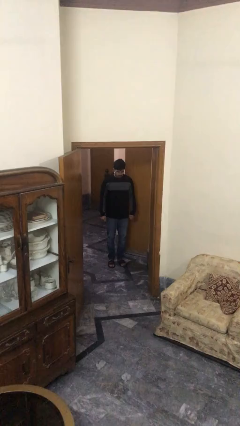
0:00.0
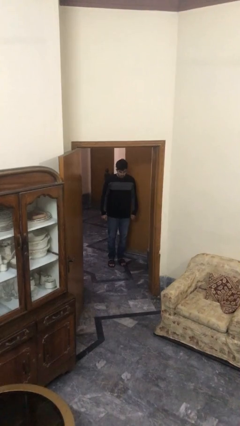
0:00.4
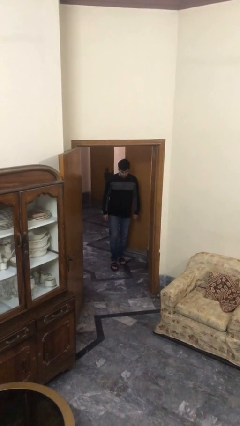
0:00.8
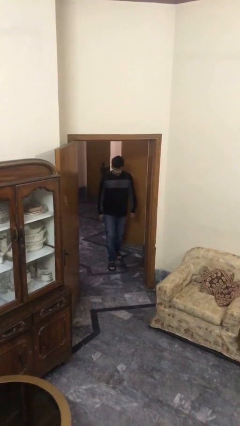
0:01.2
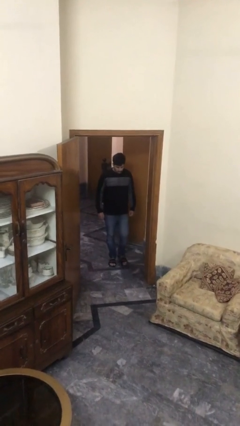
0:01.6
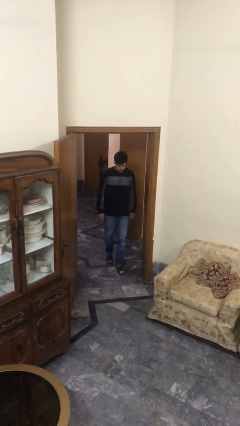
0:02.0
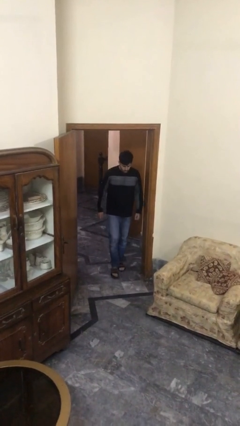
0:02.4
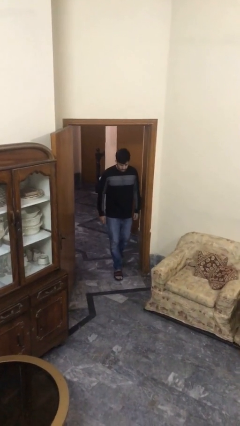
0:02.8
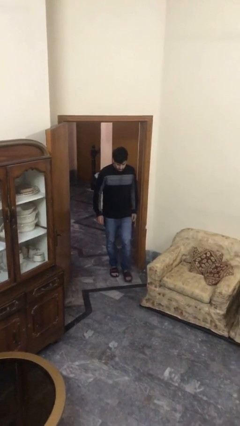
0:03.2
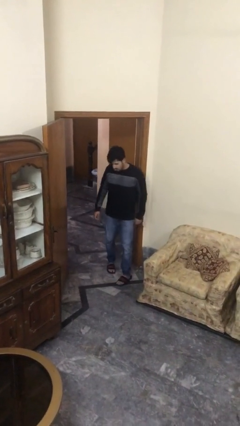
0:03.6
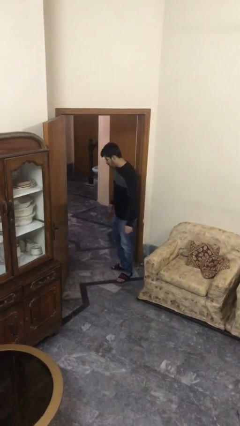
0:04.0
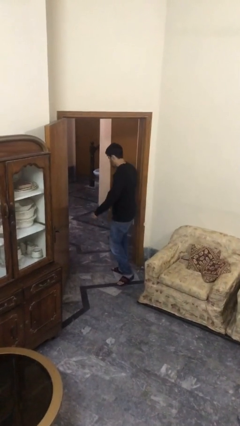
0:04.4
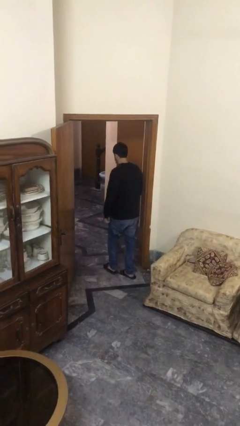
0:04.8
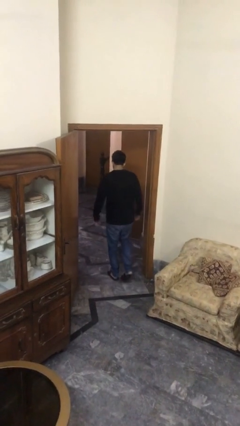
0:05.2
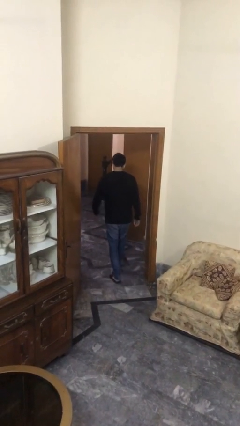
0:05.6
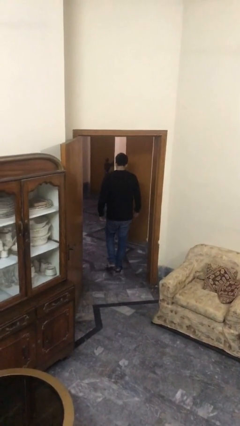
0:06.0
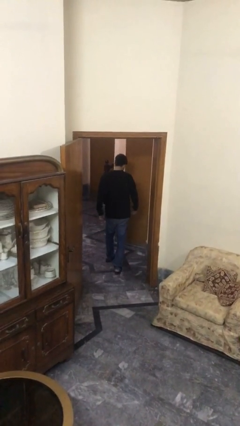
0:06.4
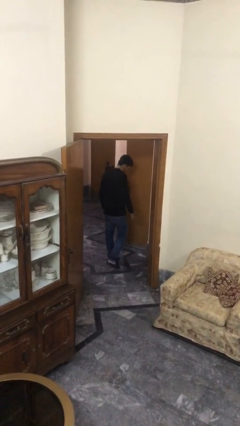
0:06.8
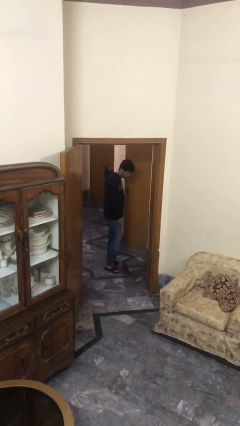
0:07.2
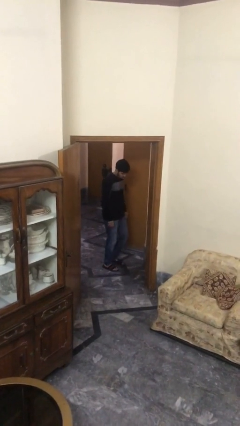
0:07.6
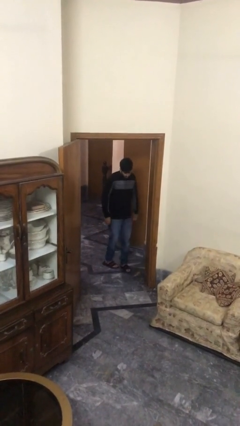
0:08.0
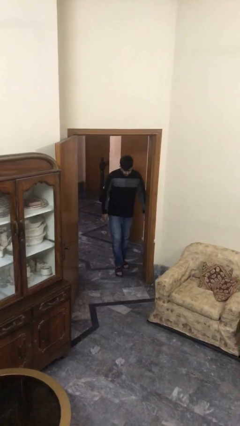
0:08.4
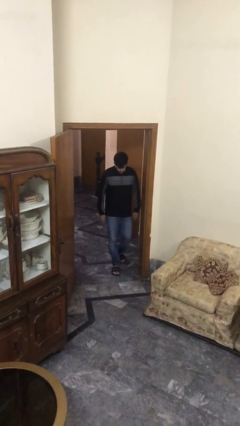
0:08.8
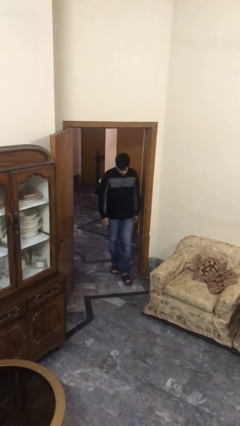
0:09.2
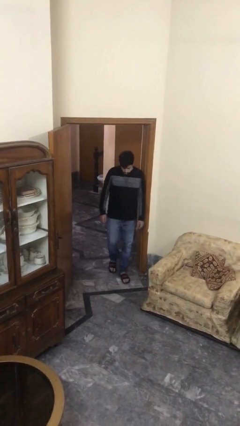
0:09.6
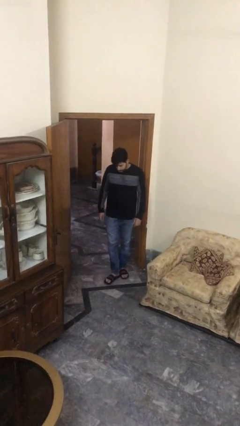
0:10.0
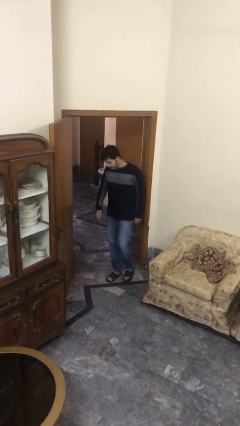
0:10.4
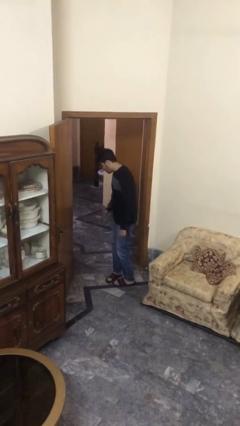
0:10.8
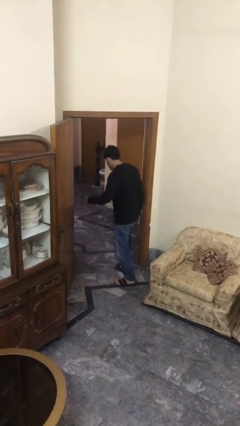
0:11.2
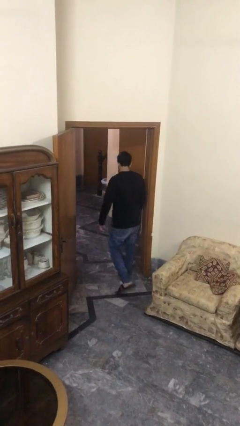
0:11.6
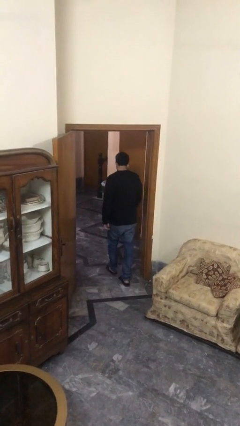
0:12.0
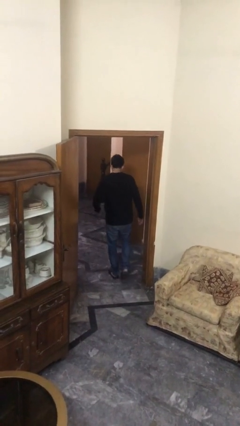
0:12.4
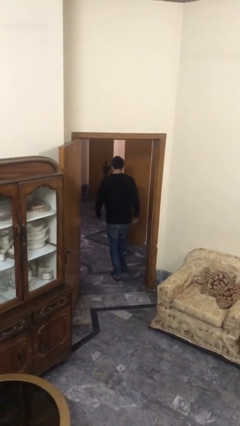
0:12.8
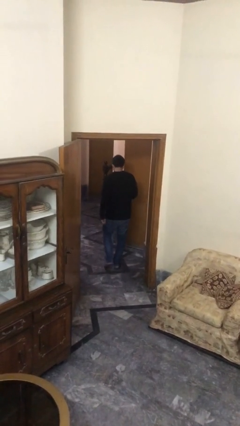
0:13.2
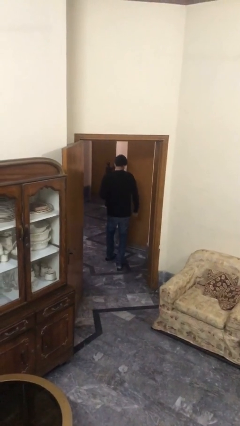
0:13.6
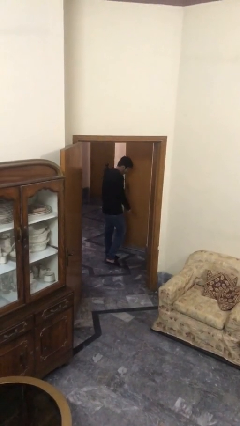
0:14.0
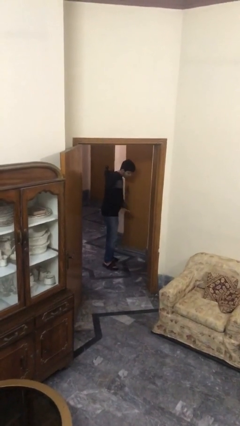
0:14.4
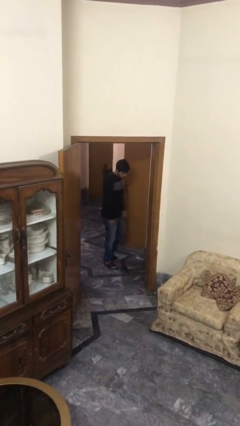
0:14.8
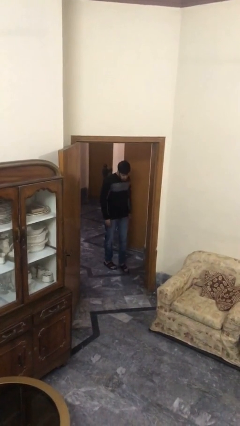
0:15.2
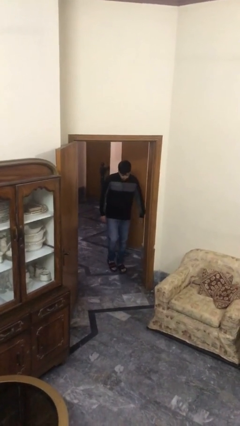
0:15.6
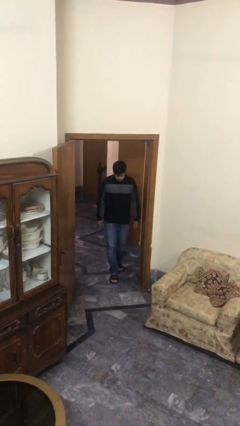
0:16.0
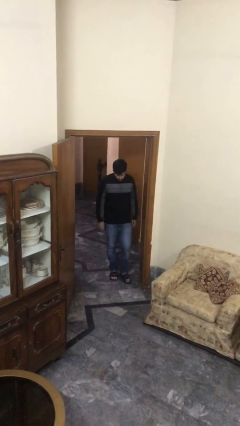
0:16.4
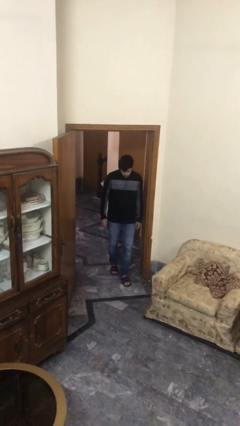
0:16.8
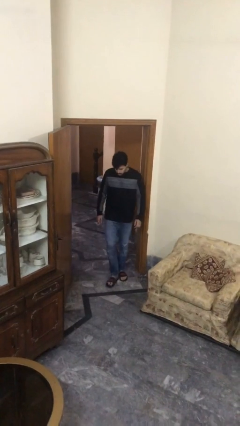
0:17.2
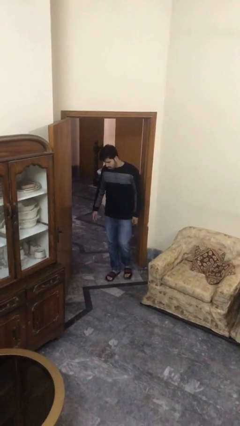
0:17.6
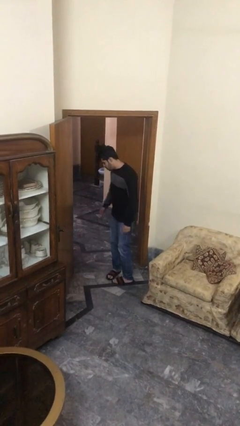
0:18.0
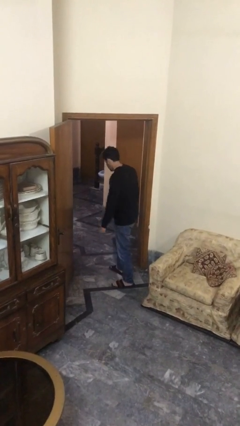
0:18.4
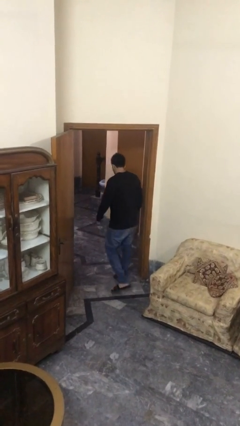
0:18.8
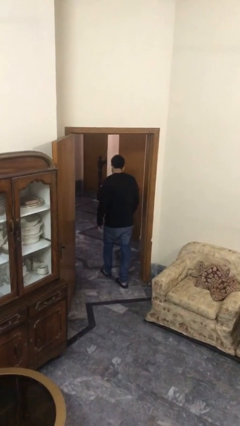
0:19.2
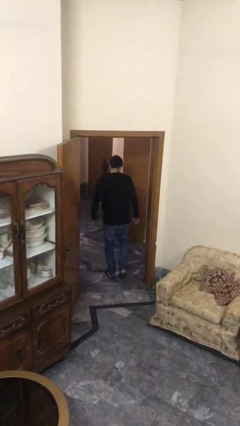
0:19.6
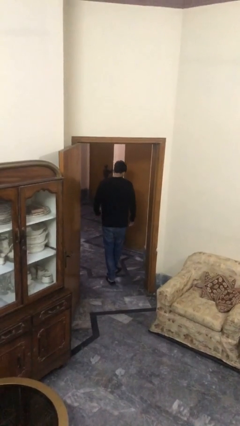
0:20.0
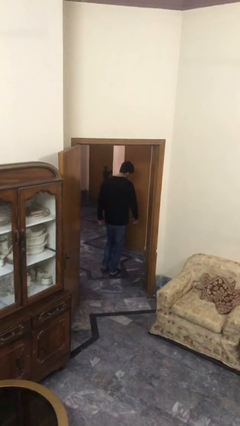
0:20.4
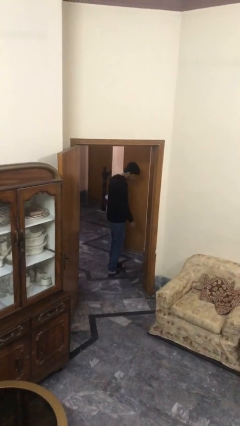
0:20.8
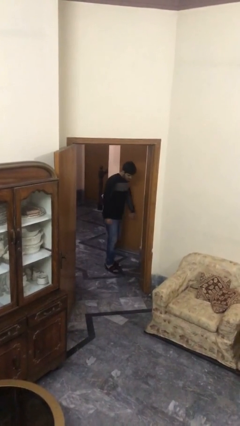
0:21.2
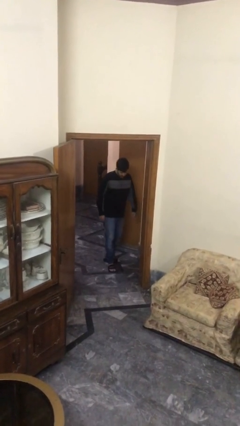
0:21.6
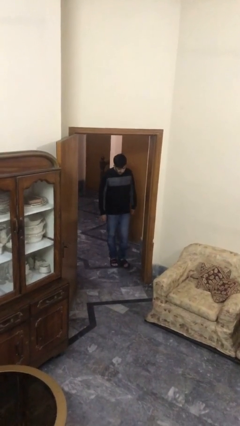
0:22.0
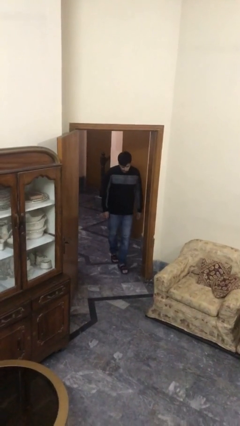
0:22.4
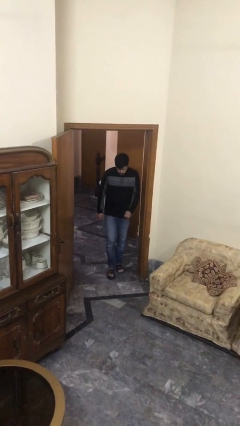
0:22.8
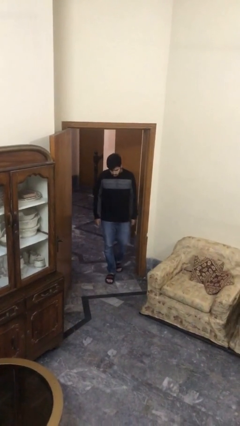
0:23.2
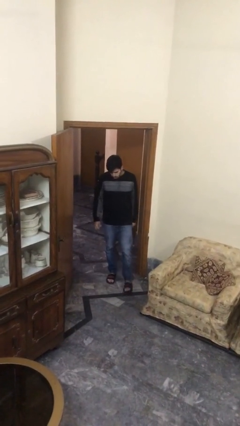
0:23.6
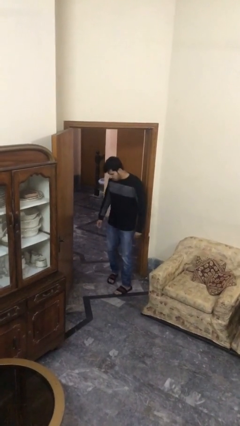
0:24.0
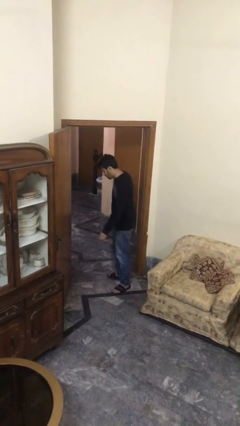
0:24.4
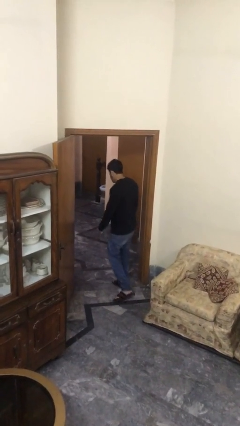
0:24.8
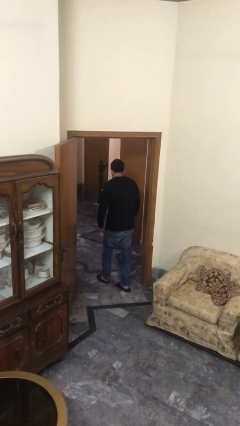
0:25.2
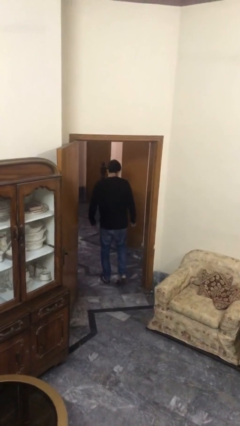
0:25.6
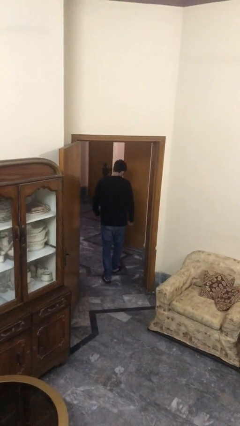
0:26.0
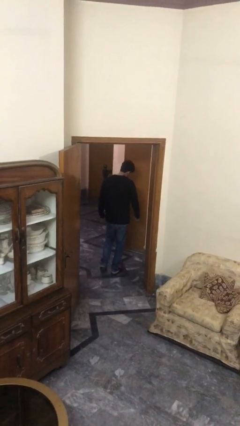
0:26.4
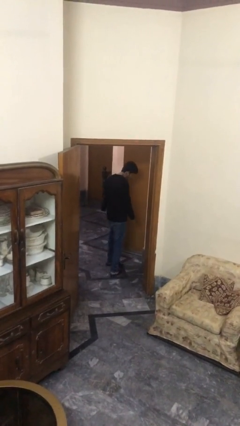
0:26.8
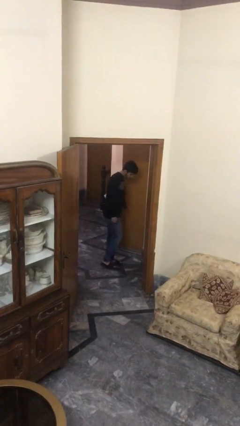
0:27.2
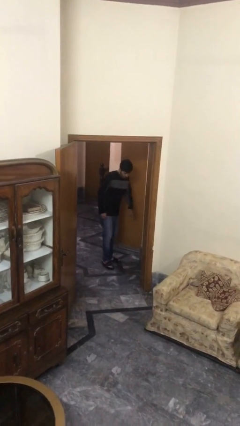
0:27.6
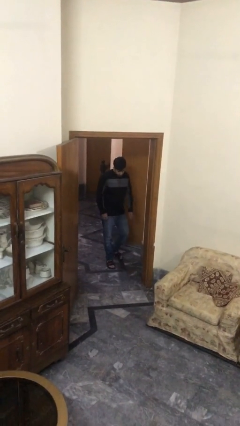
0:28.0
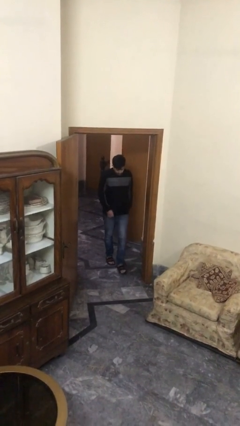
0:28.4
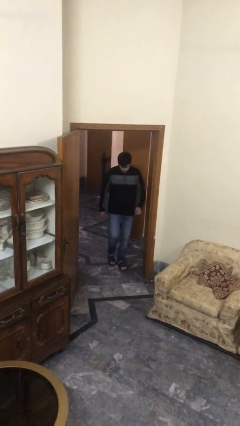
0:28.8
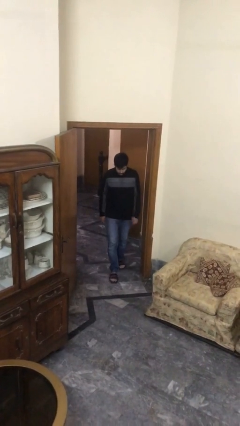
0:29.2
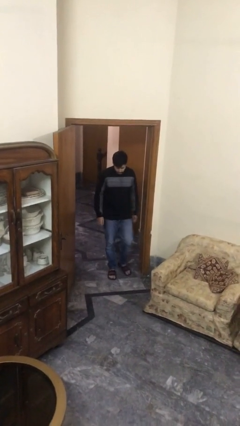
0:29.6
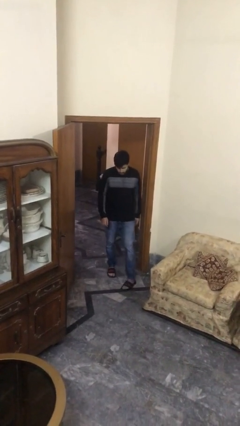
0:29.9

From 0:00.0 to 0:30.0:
person walks

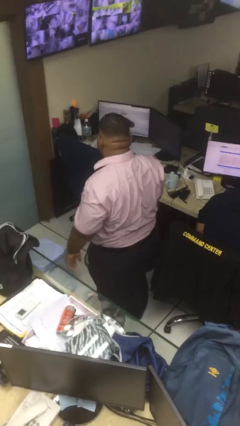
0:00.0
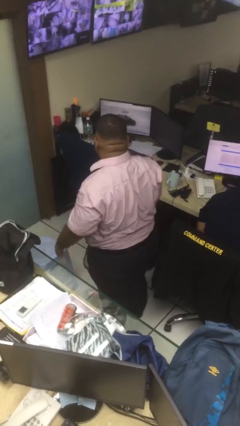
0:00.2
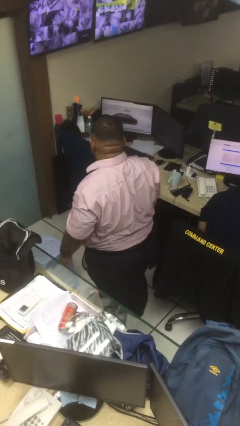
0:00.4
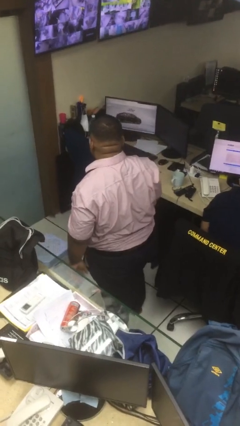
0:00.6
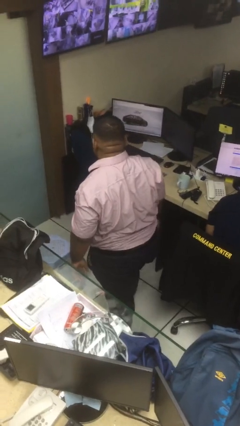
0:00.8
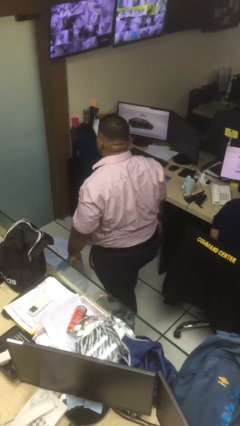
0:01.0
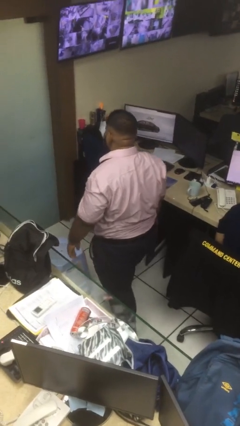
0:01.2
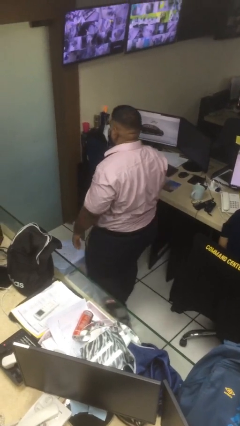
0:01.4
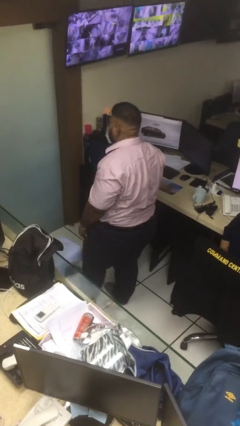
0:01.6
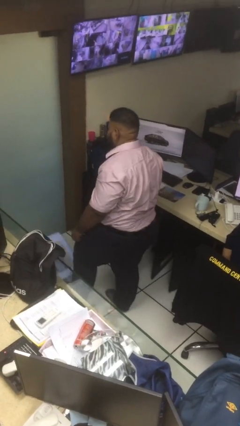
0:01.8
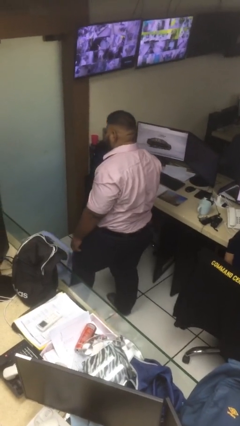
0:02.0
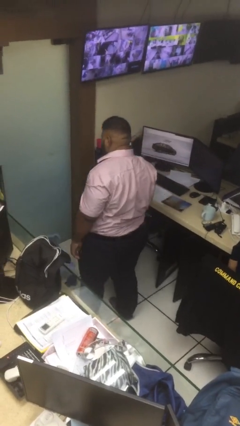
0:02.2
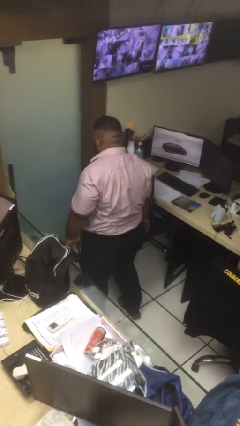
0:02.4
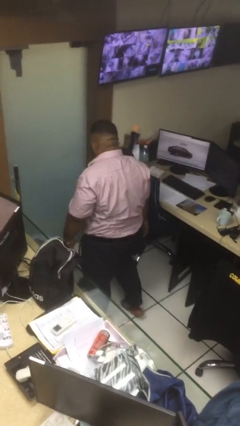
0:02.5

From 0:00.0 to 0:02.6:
person knocks over furniture
